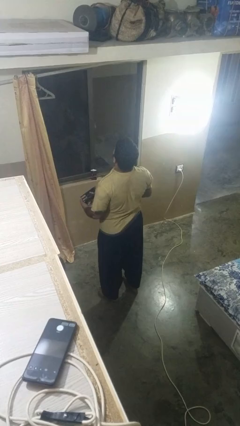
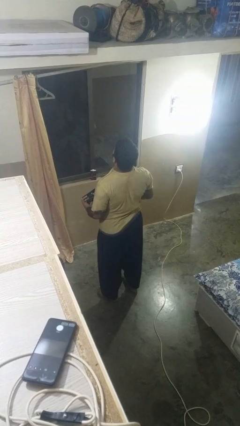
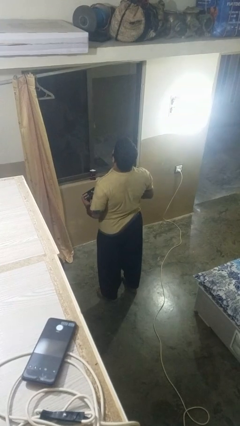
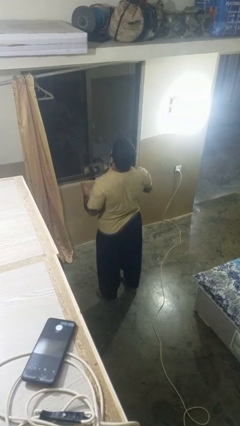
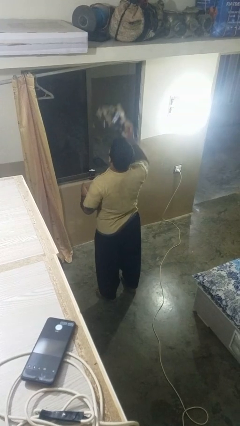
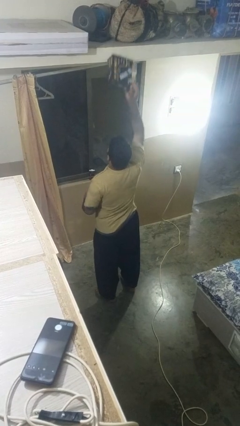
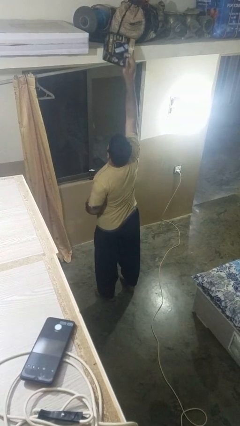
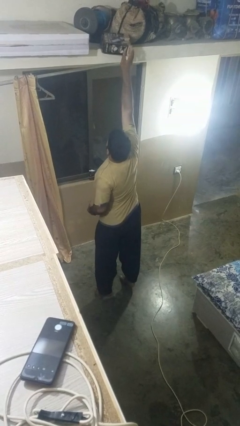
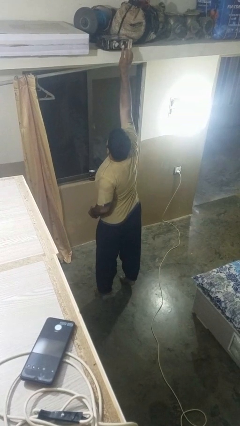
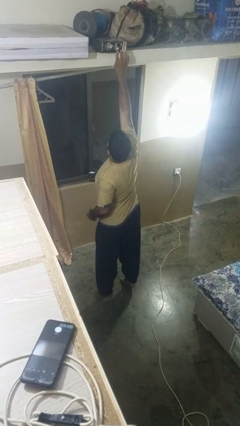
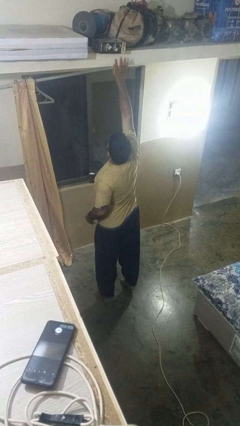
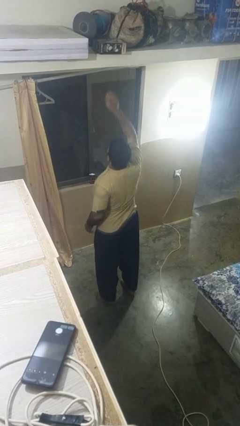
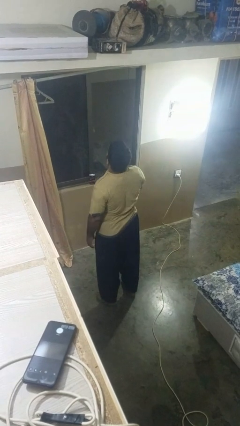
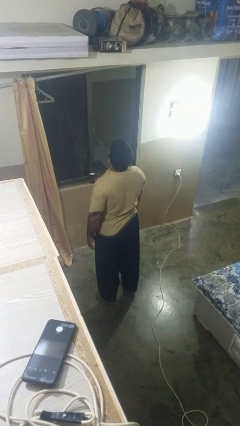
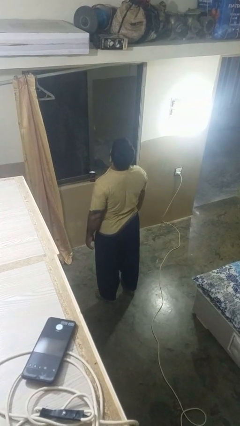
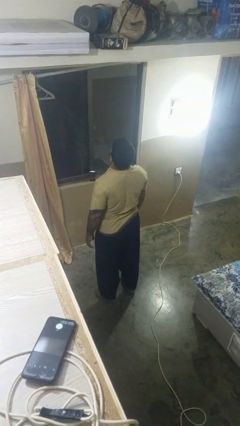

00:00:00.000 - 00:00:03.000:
person puts down object on shelf

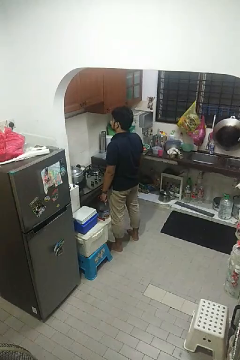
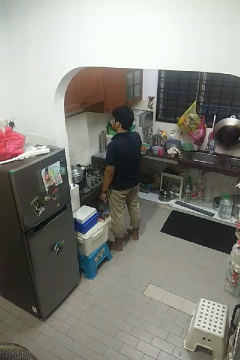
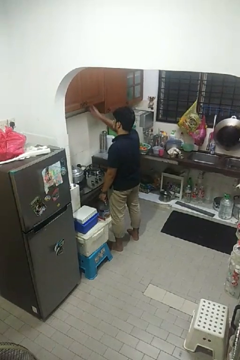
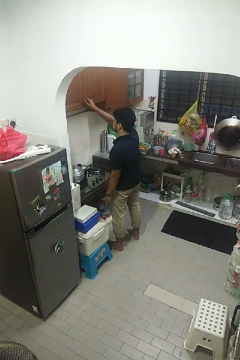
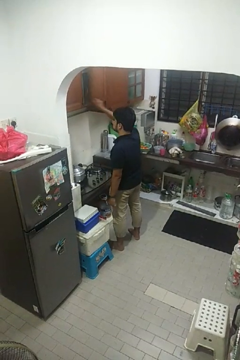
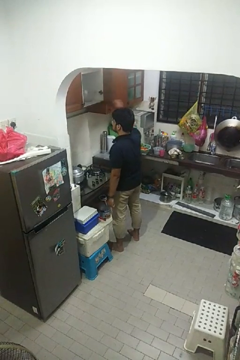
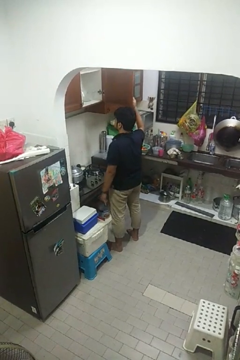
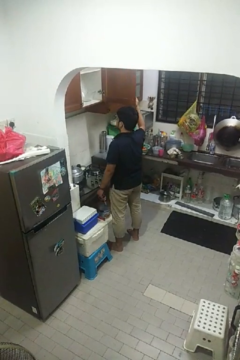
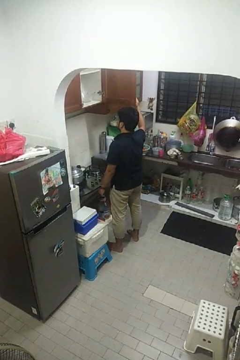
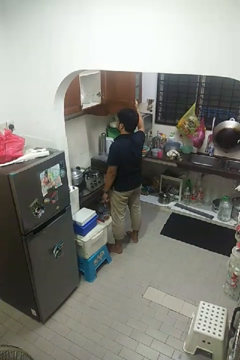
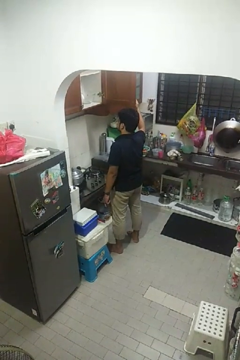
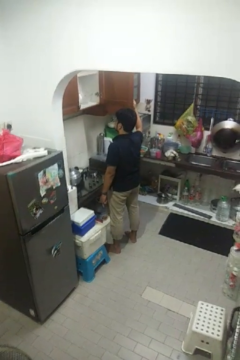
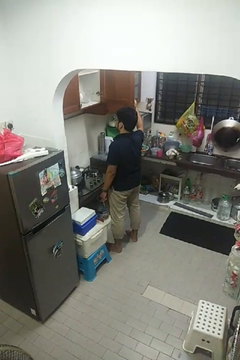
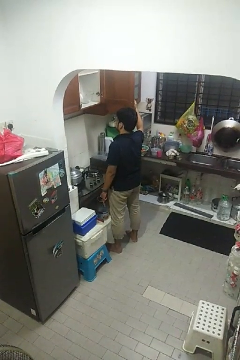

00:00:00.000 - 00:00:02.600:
person opens cabinet

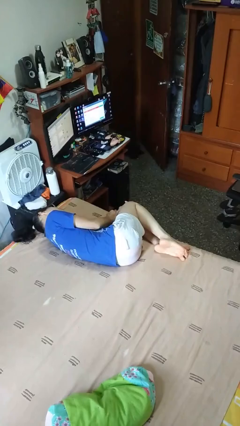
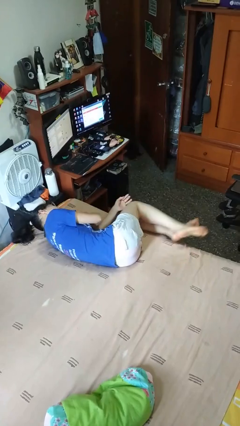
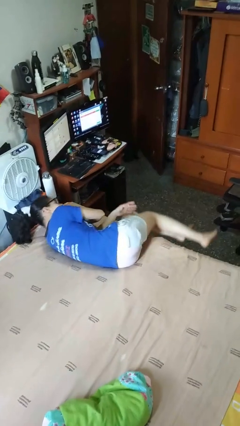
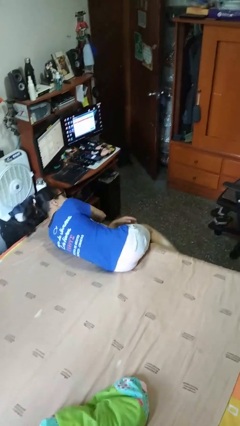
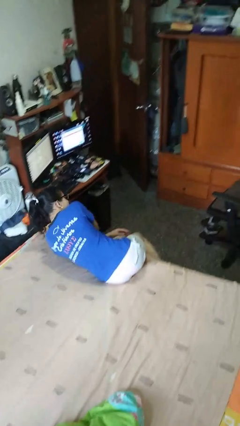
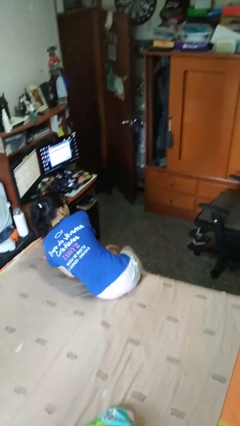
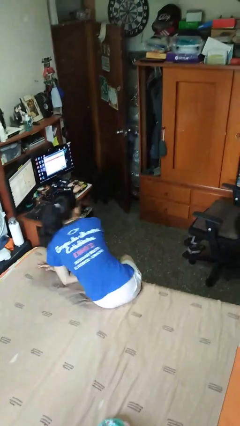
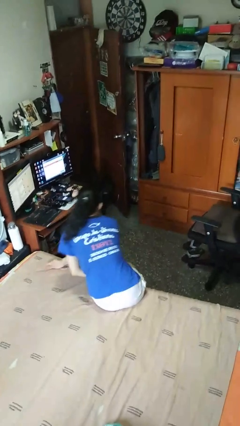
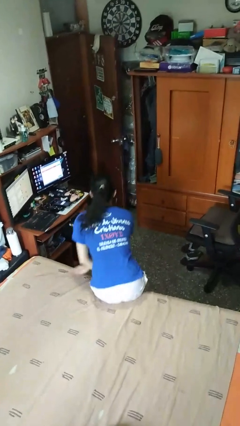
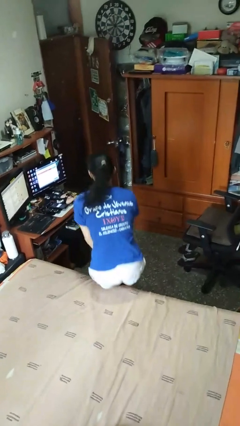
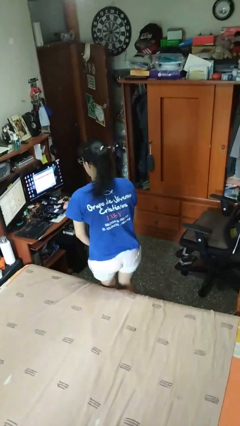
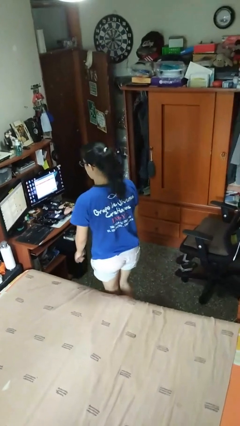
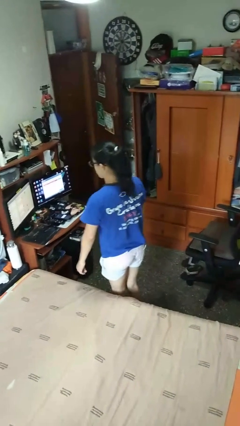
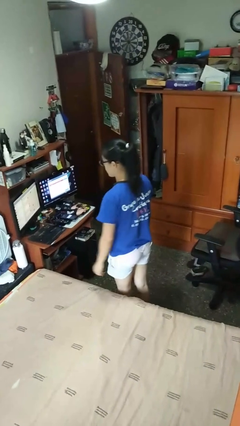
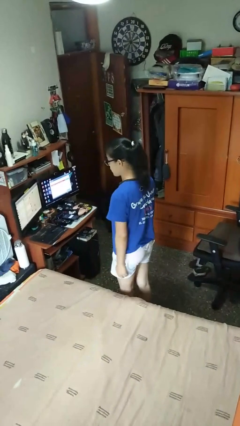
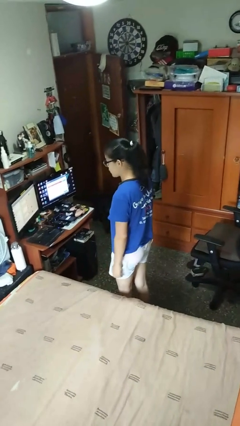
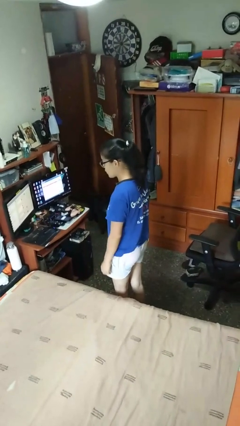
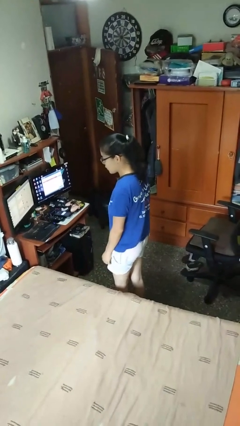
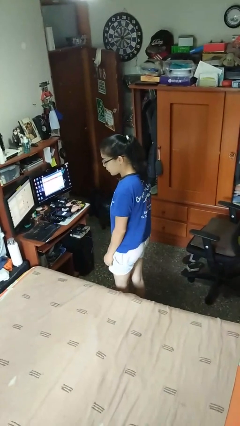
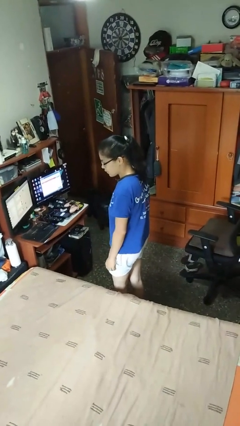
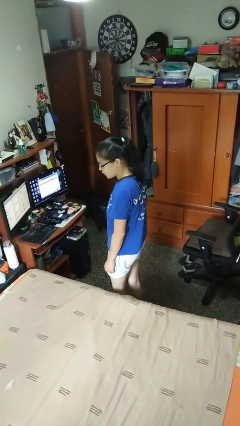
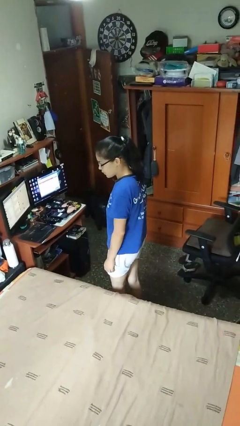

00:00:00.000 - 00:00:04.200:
person stands up

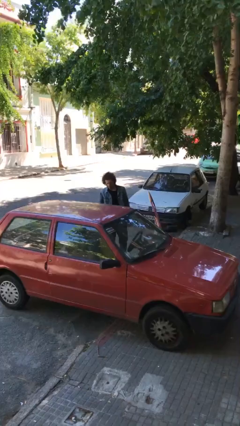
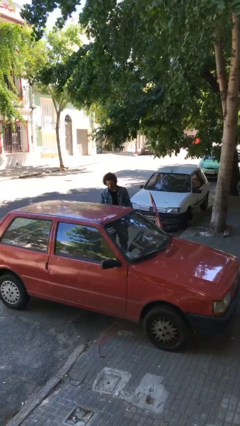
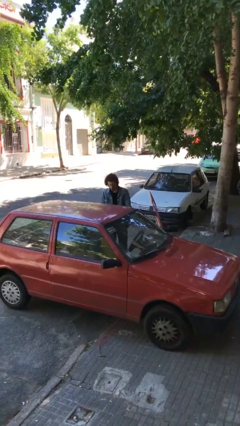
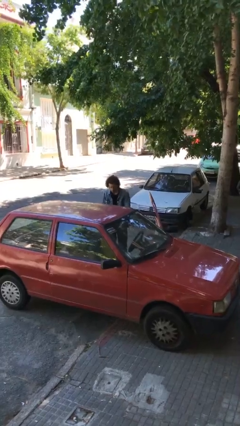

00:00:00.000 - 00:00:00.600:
person unloads car

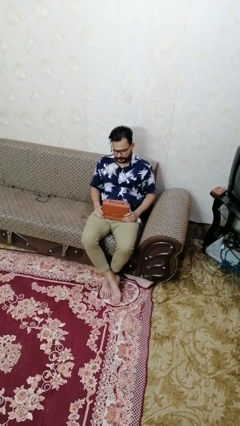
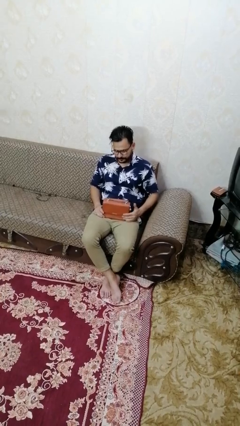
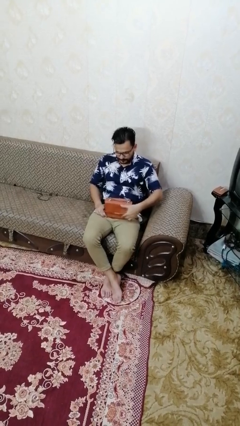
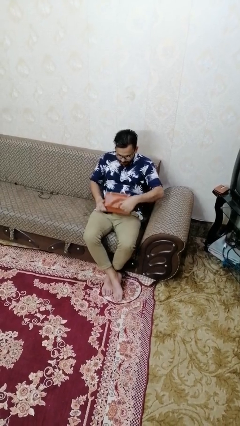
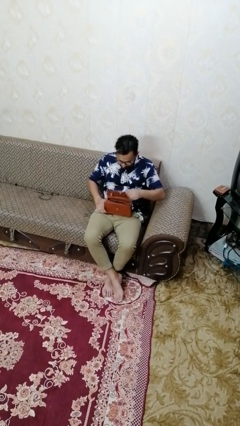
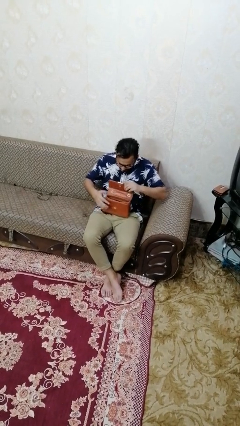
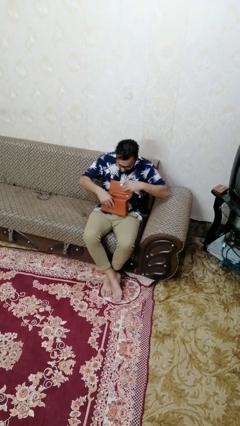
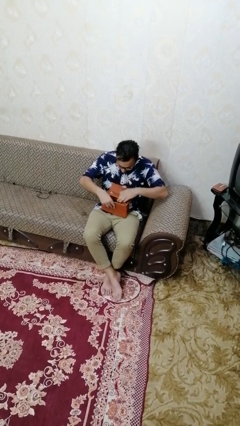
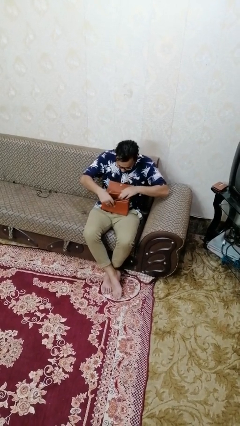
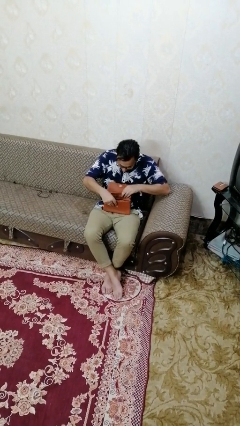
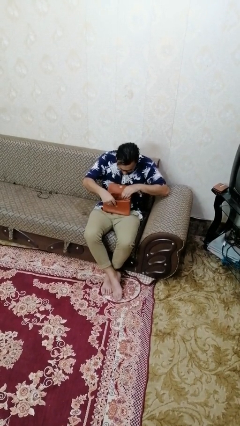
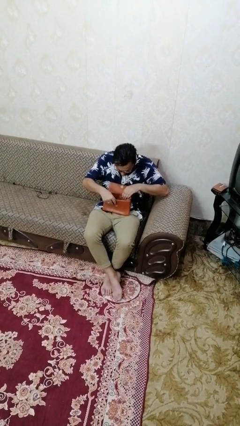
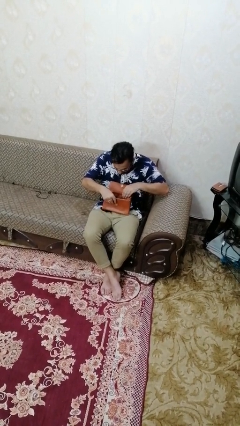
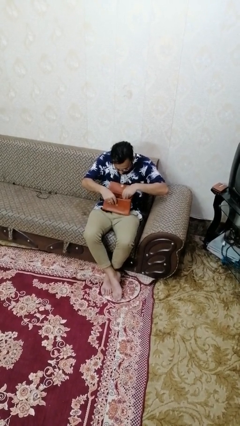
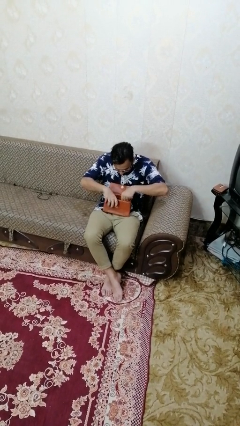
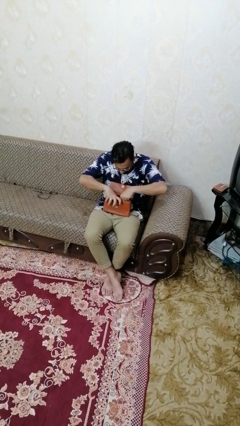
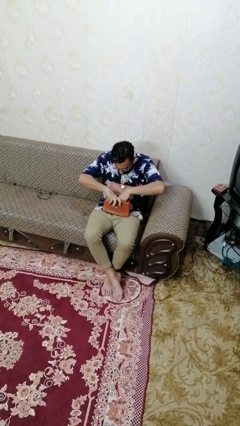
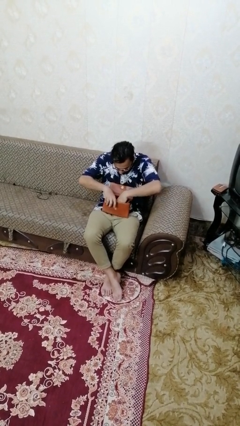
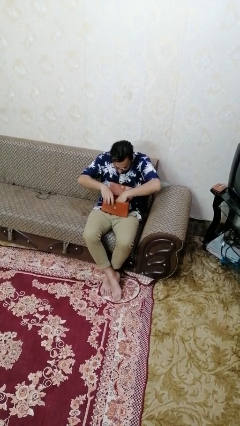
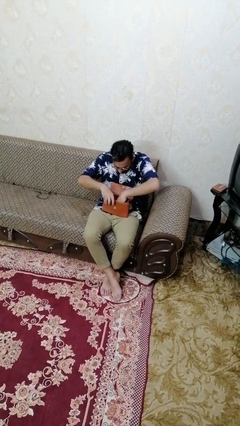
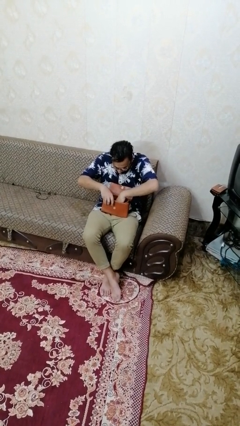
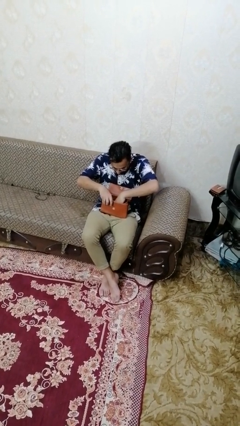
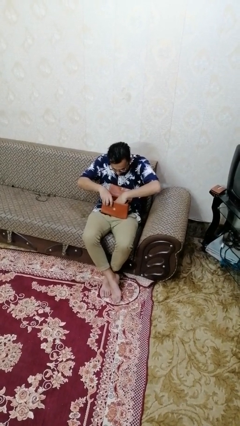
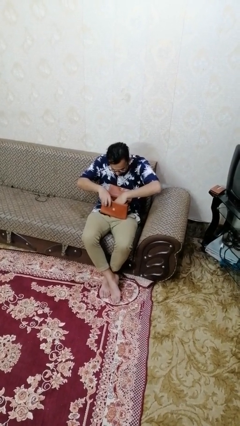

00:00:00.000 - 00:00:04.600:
person searches in purse

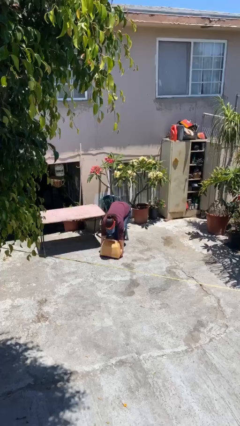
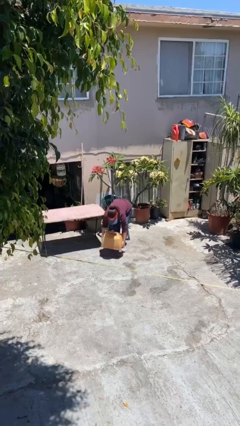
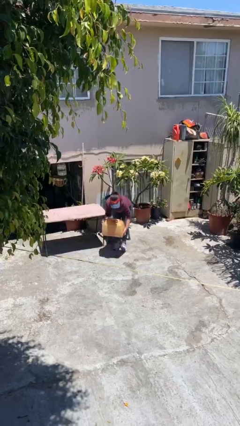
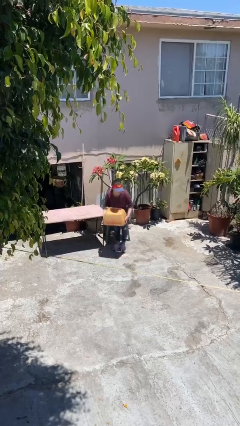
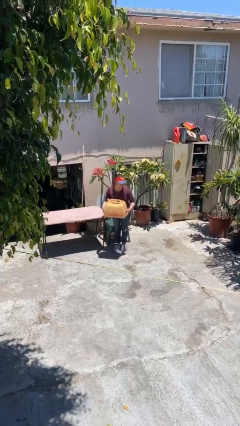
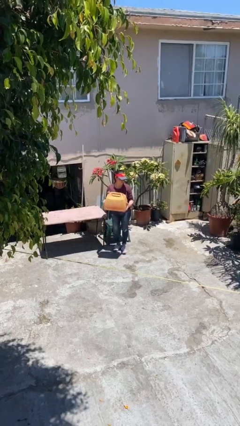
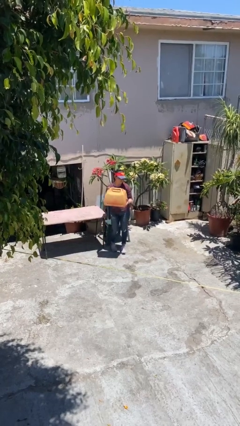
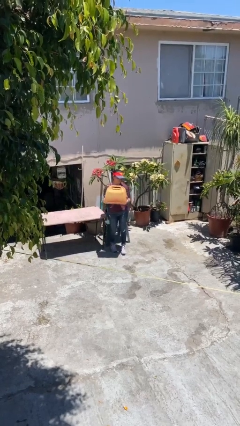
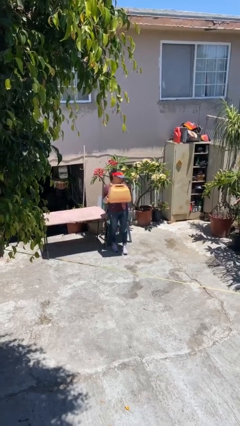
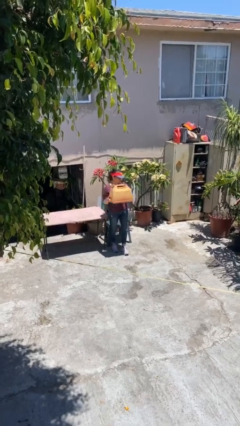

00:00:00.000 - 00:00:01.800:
person picks up object from floor

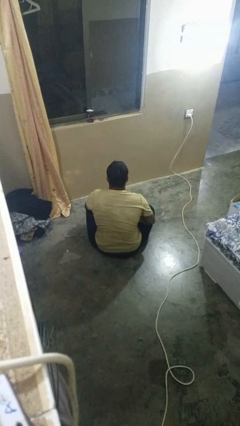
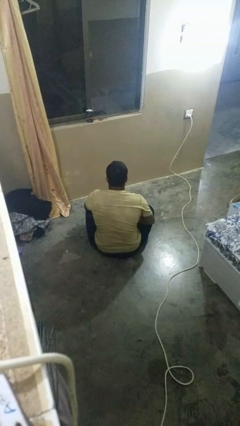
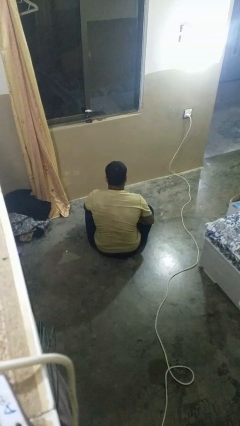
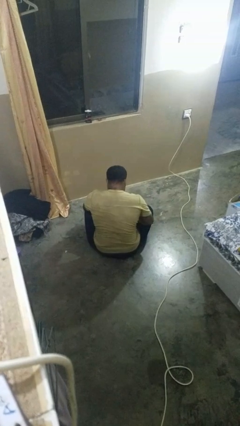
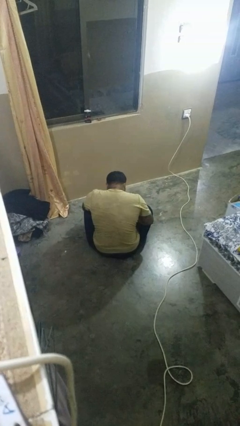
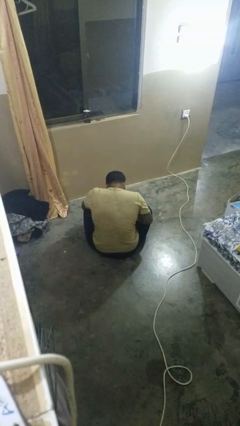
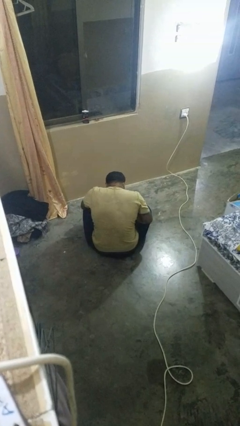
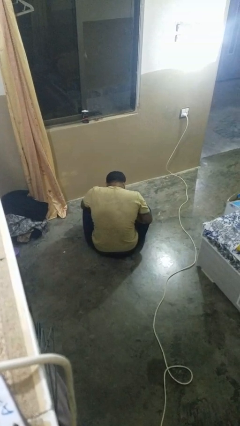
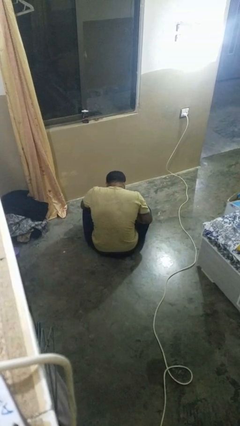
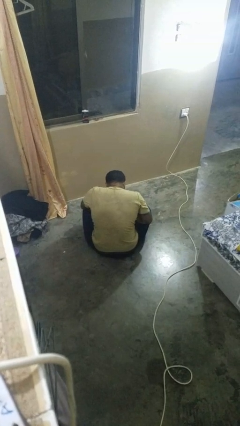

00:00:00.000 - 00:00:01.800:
person looks at hands in lap
